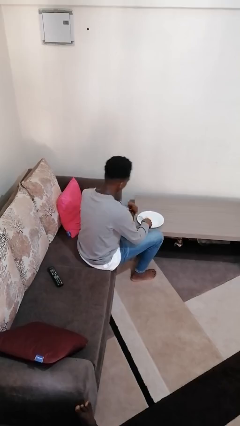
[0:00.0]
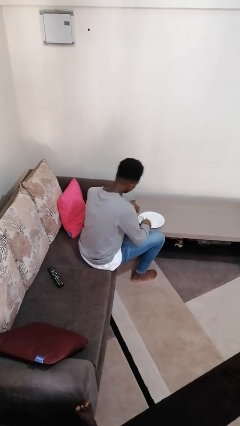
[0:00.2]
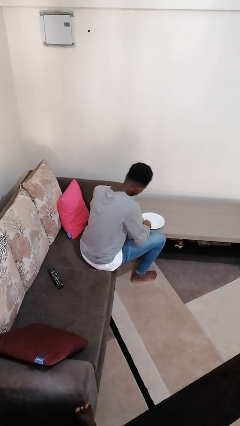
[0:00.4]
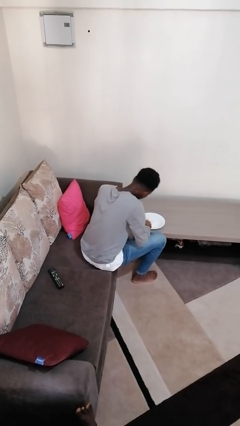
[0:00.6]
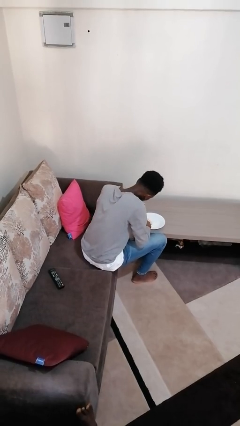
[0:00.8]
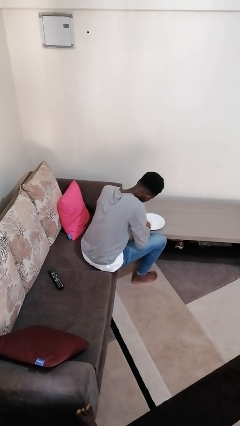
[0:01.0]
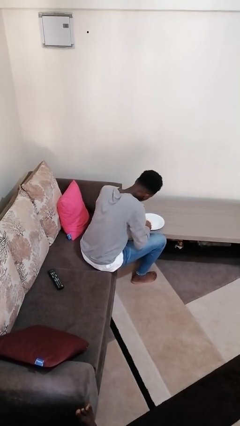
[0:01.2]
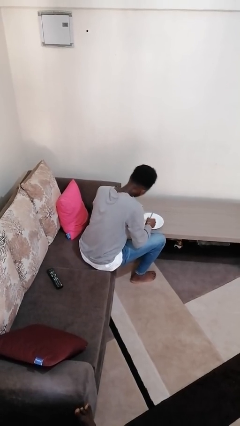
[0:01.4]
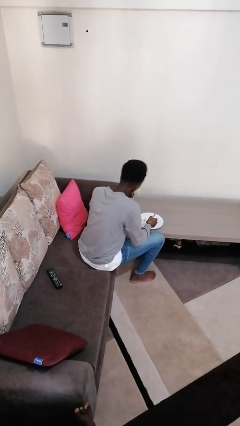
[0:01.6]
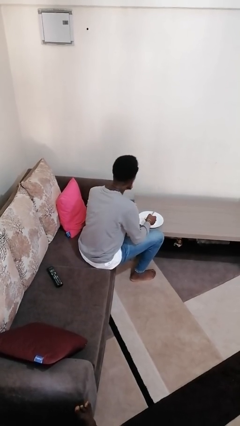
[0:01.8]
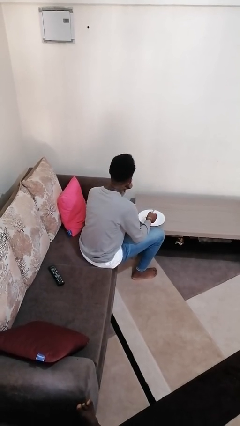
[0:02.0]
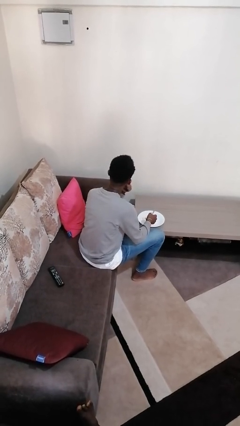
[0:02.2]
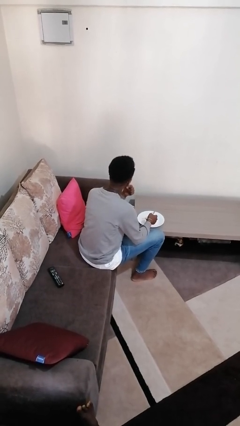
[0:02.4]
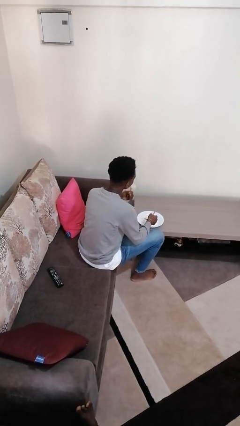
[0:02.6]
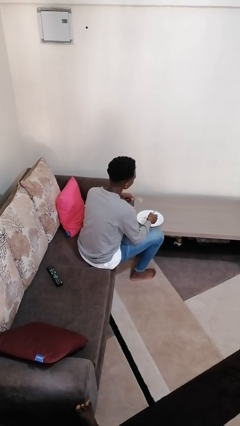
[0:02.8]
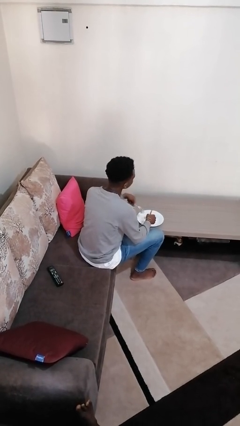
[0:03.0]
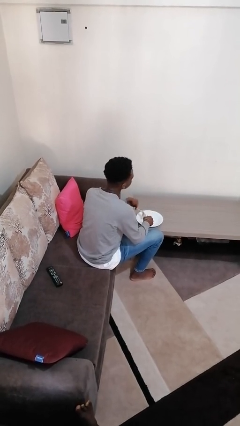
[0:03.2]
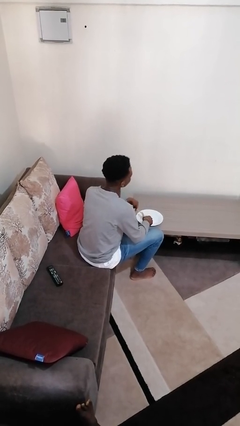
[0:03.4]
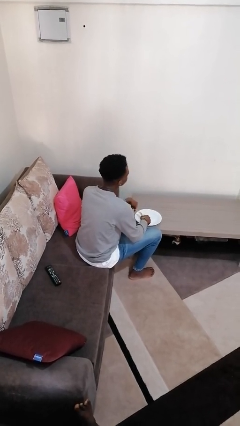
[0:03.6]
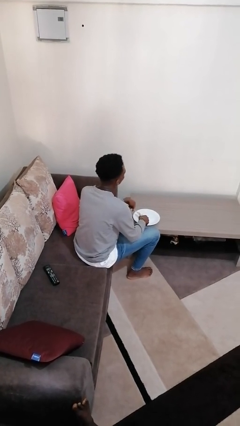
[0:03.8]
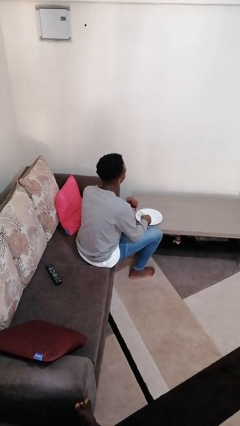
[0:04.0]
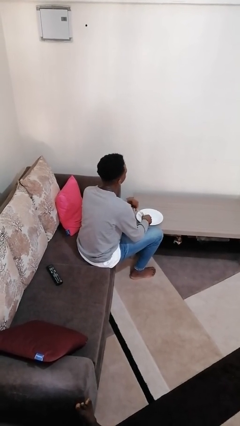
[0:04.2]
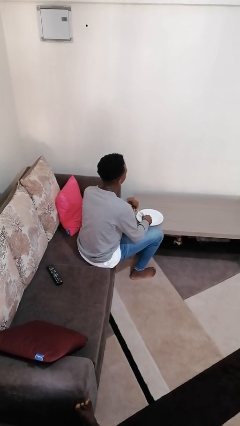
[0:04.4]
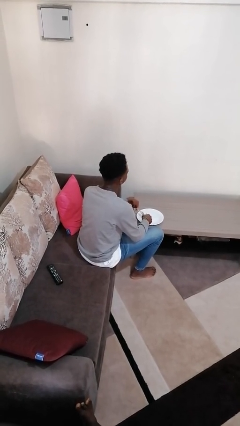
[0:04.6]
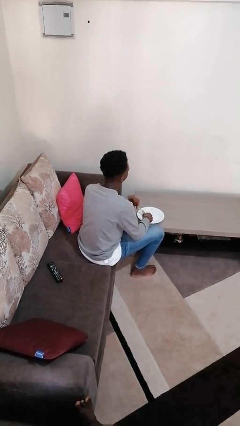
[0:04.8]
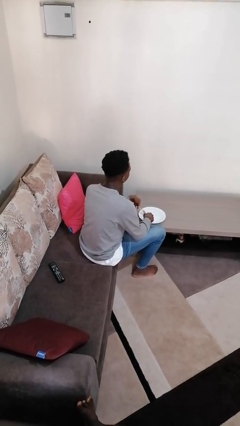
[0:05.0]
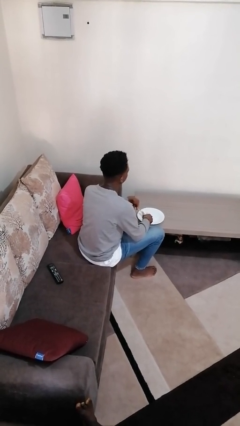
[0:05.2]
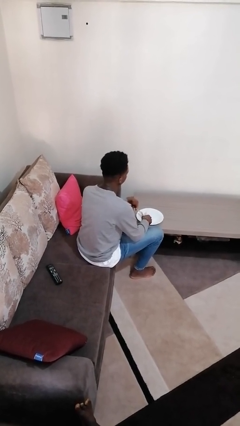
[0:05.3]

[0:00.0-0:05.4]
person eats with utensil

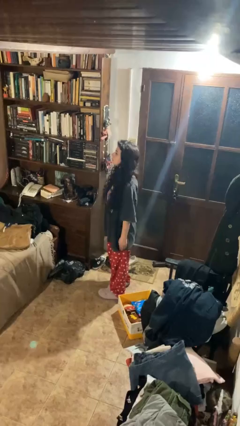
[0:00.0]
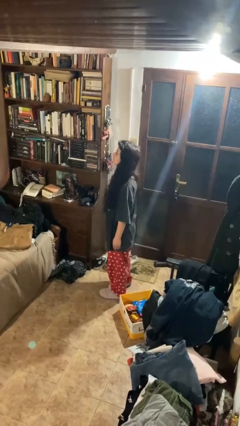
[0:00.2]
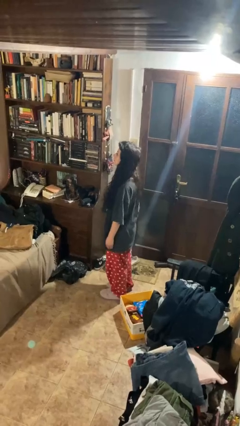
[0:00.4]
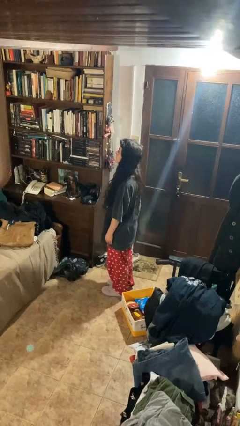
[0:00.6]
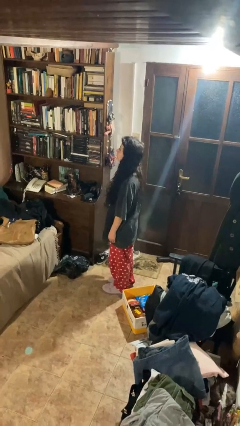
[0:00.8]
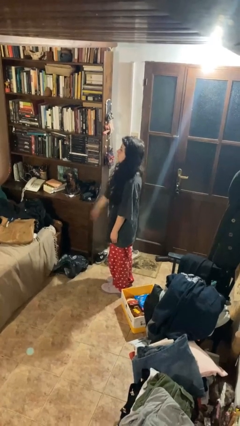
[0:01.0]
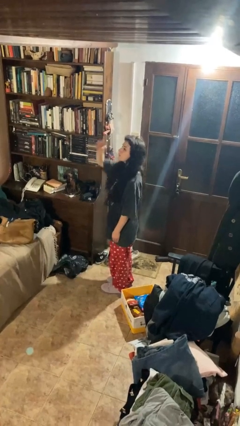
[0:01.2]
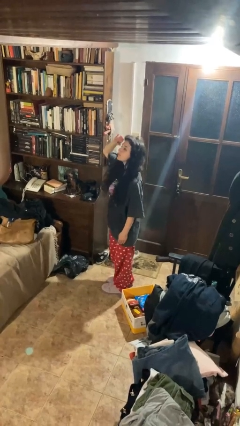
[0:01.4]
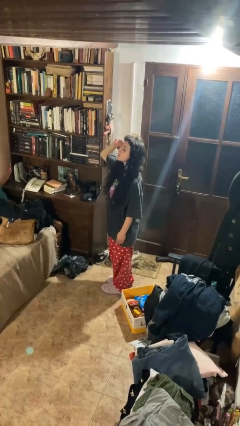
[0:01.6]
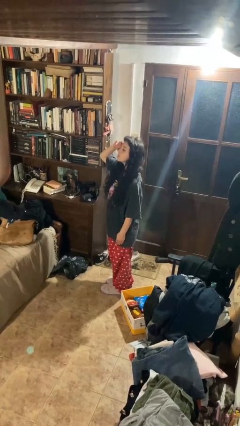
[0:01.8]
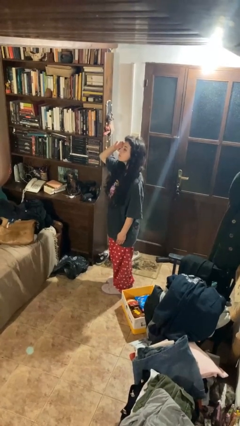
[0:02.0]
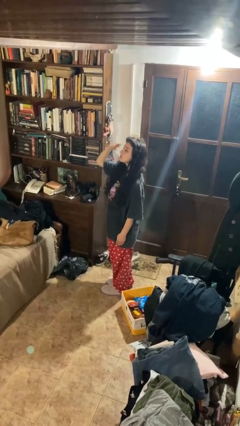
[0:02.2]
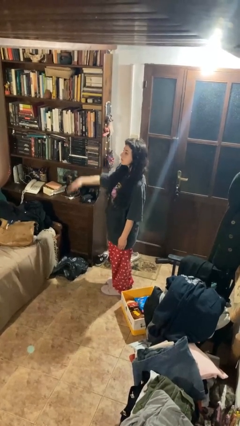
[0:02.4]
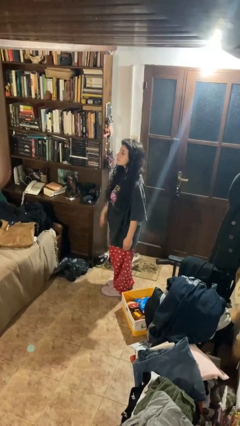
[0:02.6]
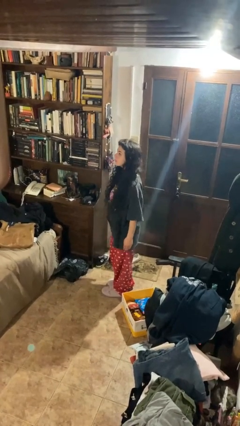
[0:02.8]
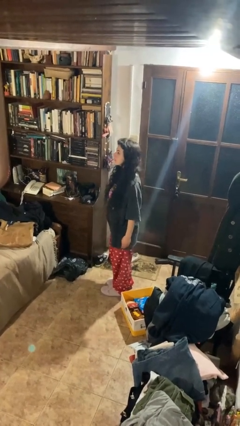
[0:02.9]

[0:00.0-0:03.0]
person salutes

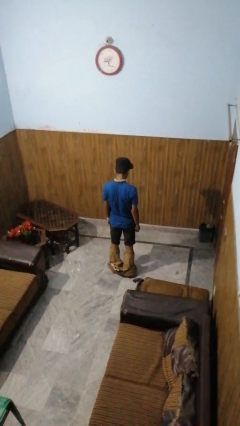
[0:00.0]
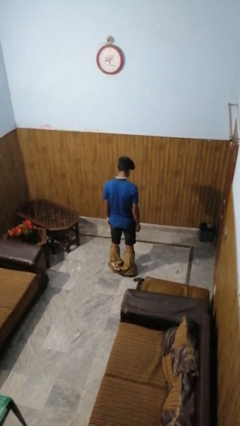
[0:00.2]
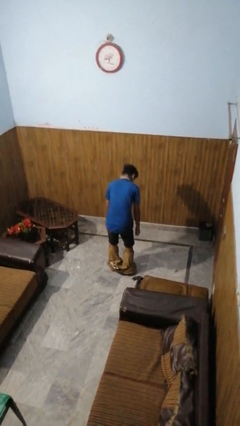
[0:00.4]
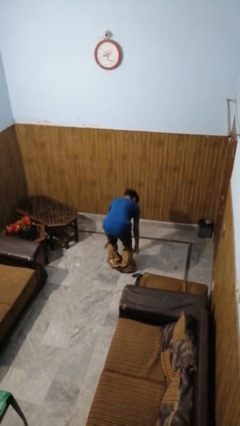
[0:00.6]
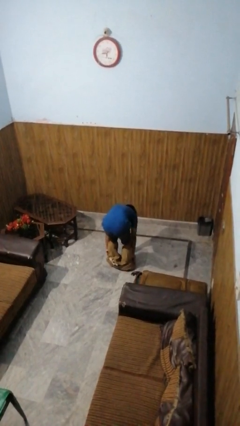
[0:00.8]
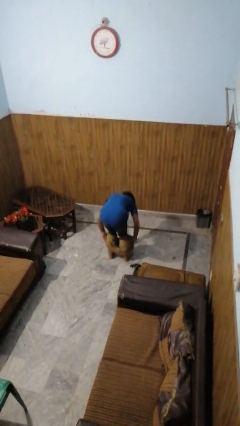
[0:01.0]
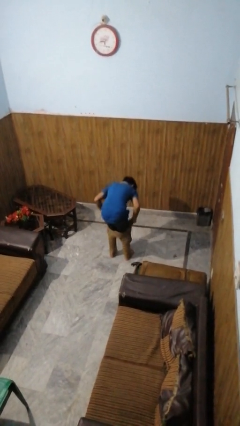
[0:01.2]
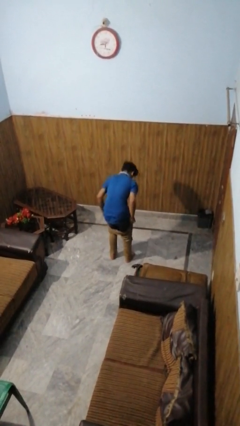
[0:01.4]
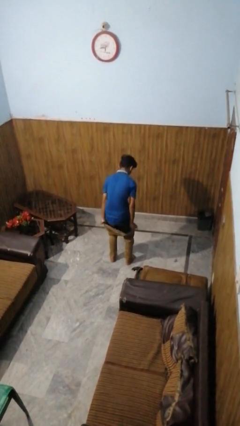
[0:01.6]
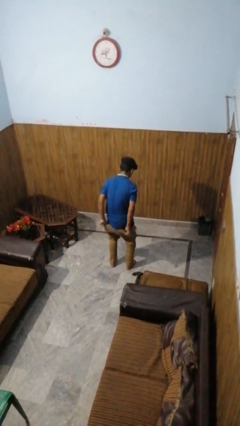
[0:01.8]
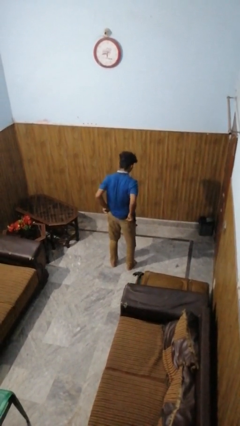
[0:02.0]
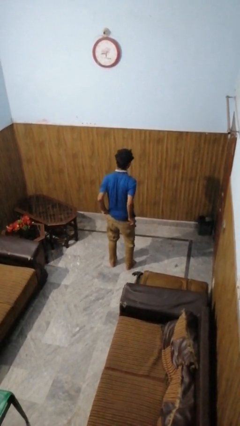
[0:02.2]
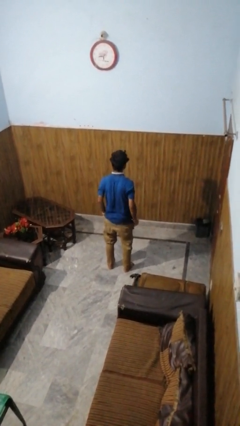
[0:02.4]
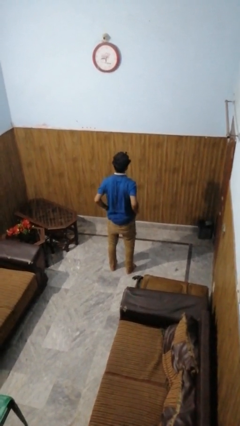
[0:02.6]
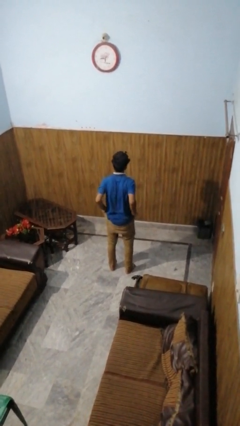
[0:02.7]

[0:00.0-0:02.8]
person puts on pants

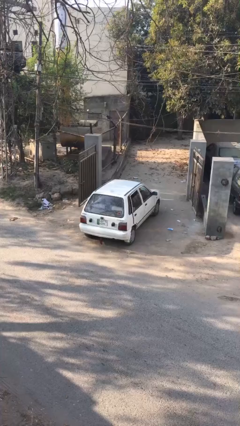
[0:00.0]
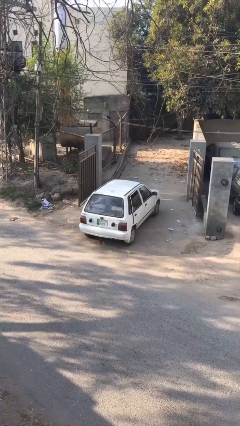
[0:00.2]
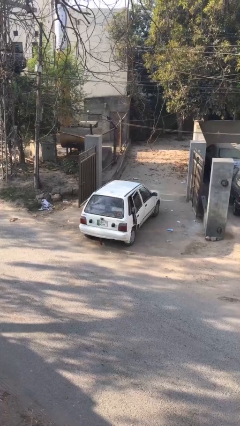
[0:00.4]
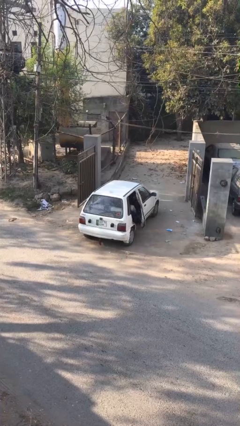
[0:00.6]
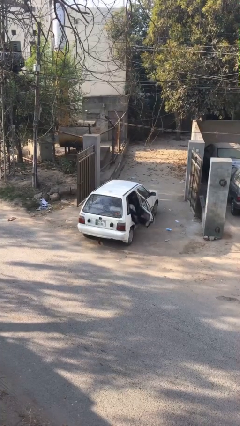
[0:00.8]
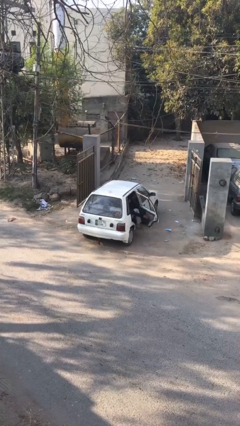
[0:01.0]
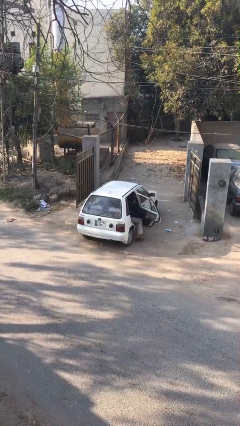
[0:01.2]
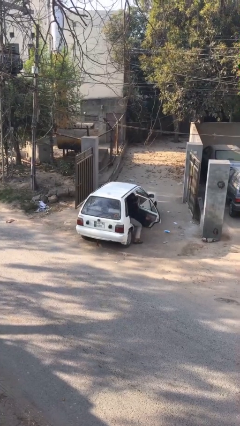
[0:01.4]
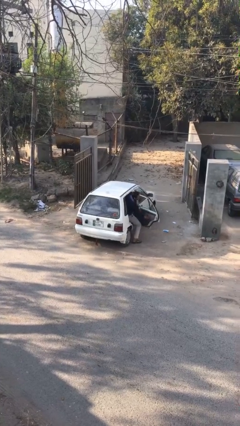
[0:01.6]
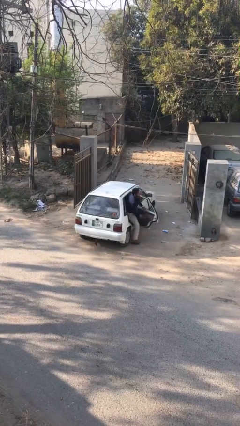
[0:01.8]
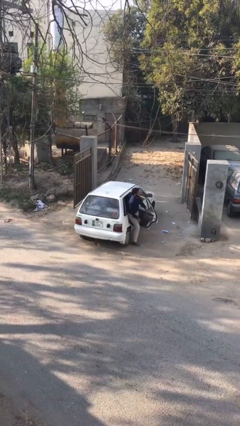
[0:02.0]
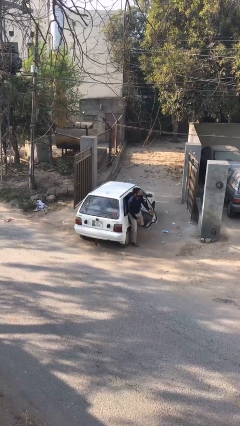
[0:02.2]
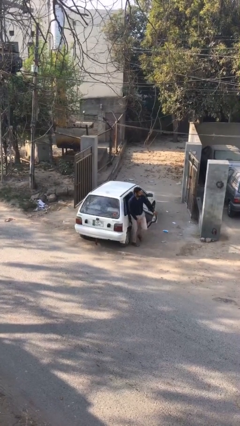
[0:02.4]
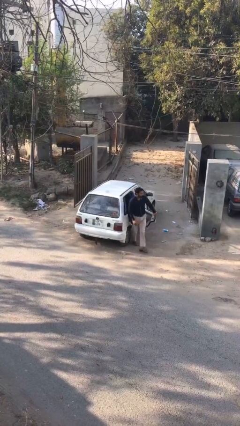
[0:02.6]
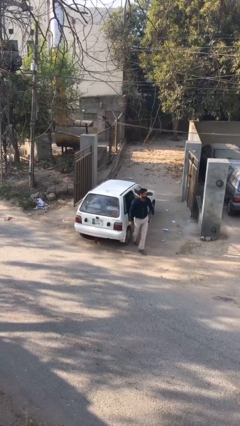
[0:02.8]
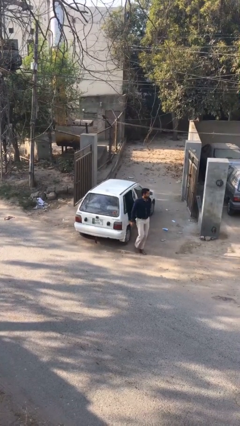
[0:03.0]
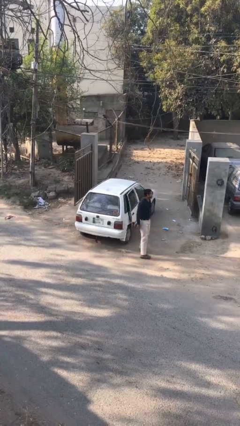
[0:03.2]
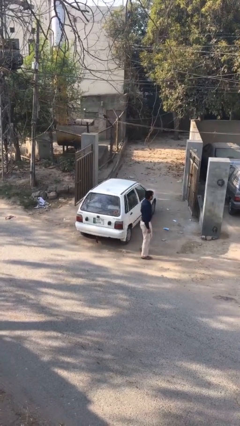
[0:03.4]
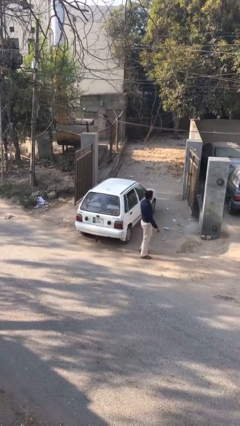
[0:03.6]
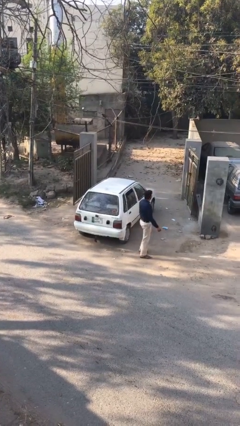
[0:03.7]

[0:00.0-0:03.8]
car drops off person

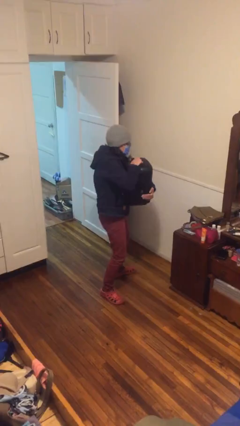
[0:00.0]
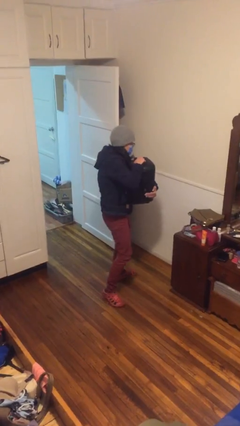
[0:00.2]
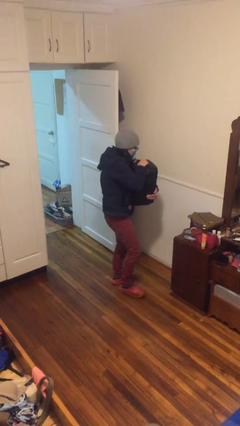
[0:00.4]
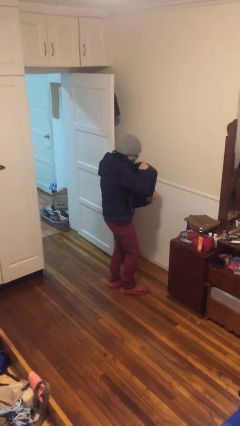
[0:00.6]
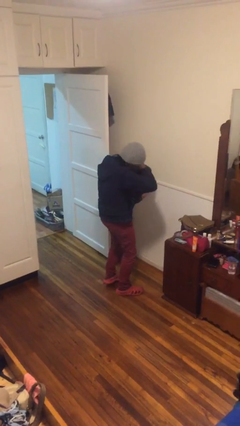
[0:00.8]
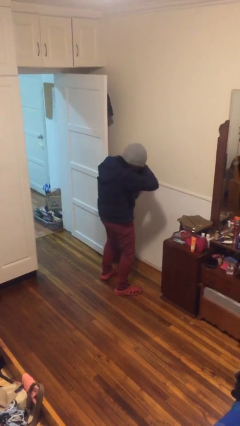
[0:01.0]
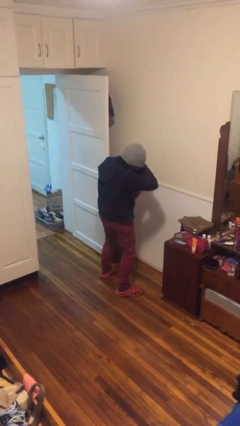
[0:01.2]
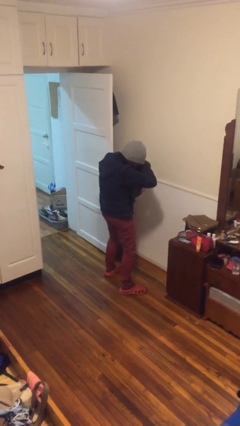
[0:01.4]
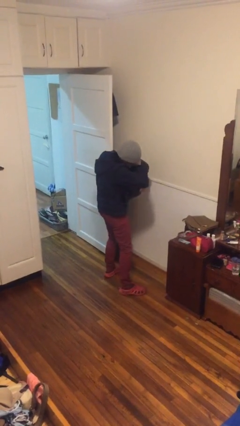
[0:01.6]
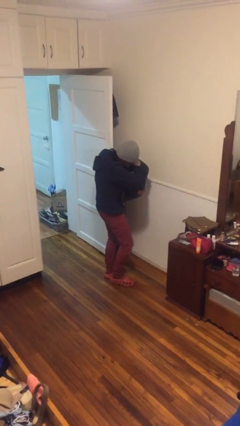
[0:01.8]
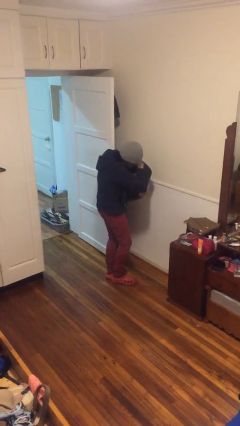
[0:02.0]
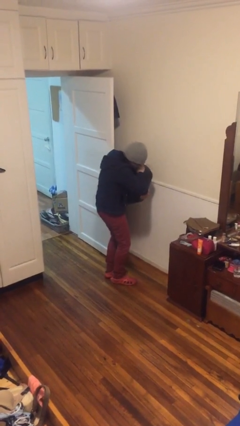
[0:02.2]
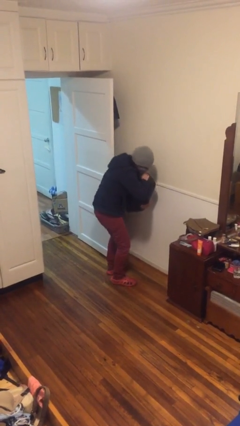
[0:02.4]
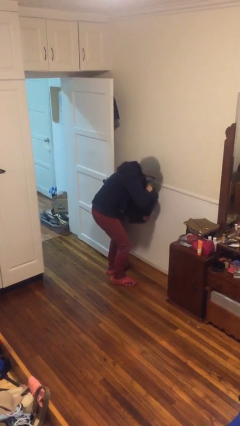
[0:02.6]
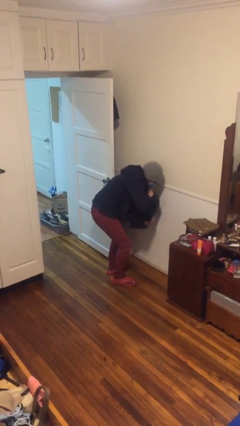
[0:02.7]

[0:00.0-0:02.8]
person carries heavy object
